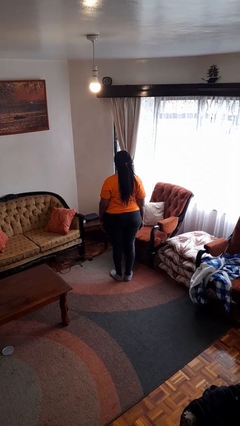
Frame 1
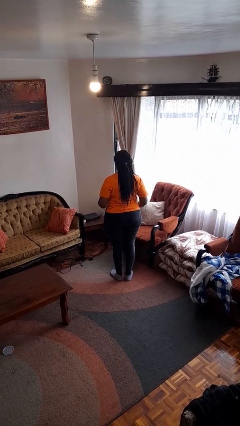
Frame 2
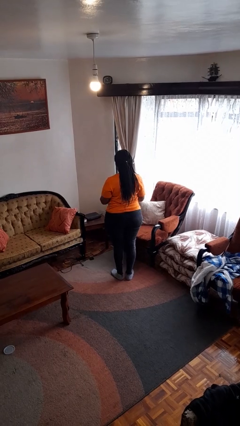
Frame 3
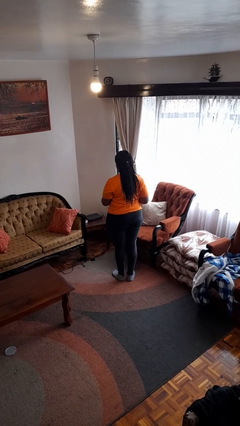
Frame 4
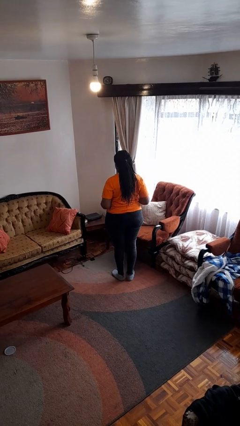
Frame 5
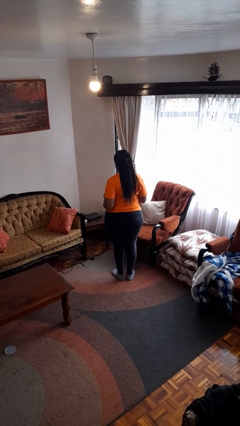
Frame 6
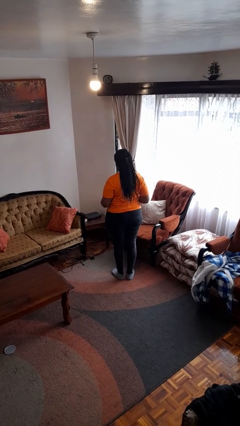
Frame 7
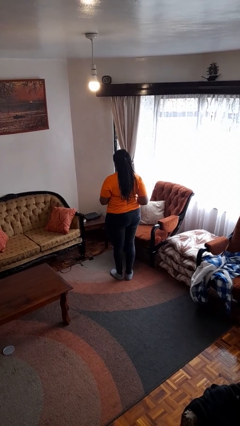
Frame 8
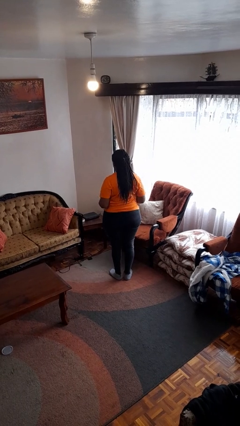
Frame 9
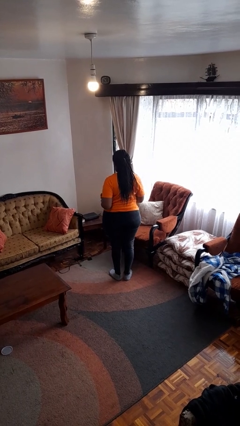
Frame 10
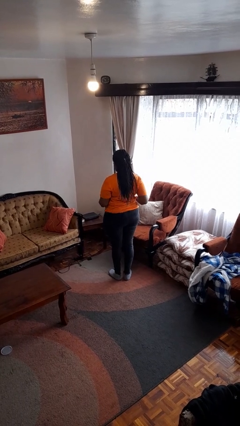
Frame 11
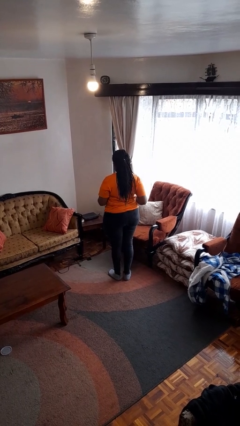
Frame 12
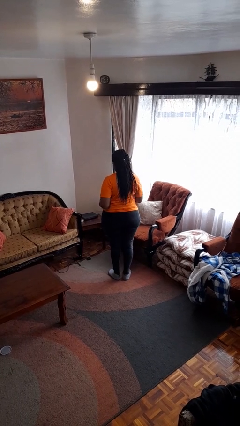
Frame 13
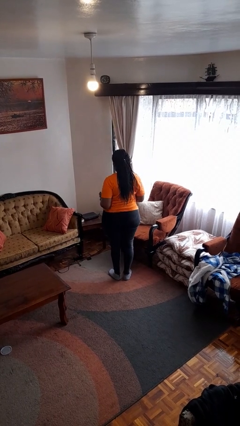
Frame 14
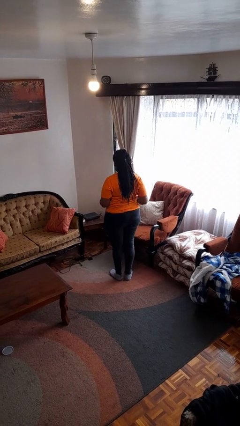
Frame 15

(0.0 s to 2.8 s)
person wiggles hips

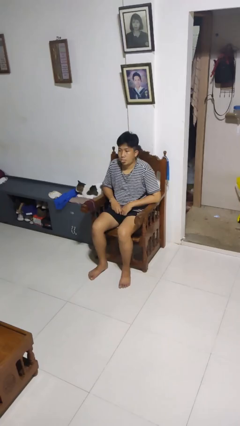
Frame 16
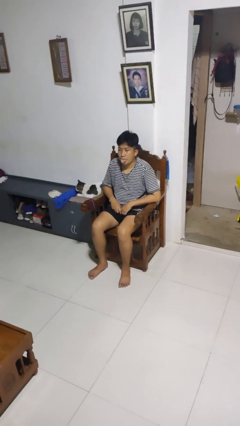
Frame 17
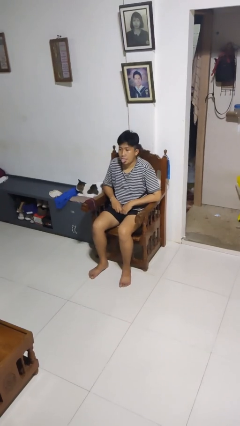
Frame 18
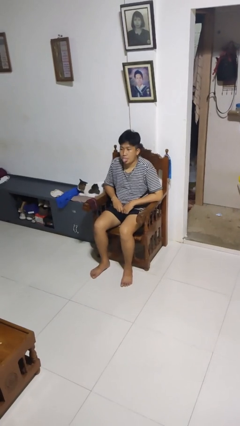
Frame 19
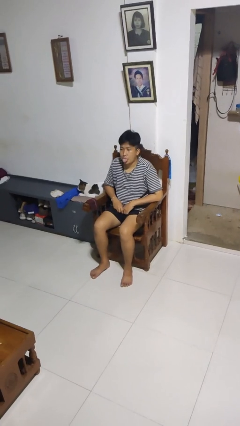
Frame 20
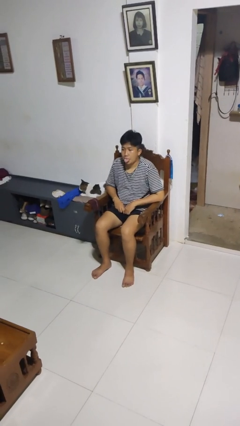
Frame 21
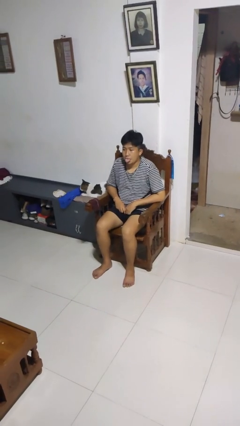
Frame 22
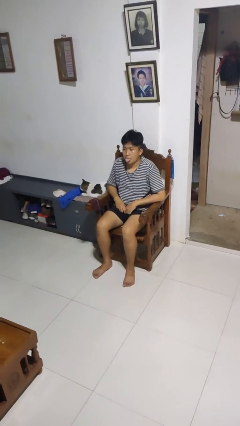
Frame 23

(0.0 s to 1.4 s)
person sticks out tongue

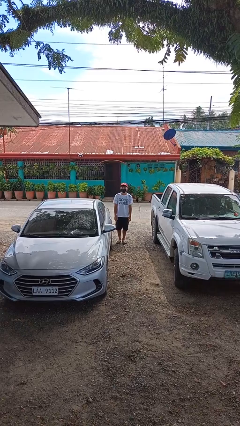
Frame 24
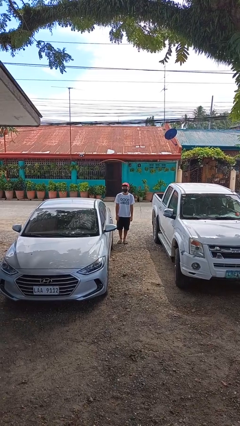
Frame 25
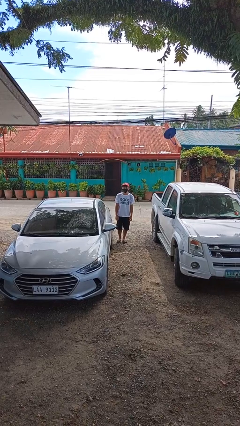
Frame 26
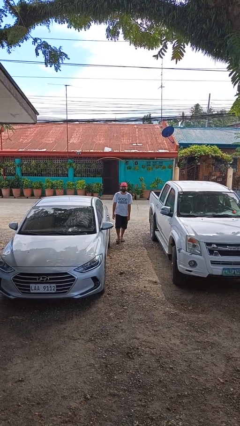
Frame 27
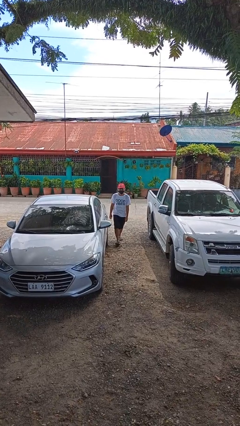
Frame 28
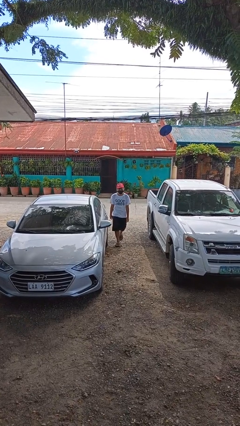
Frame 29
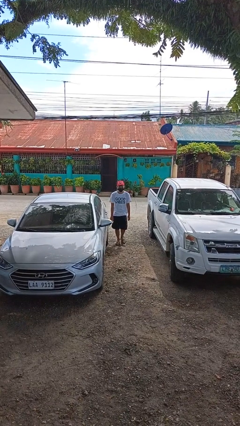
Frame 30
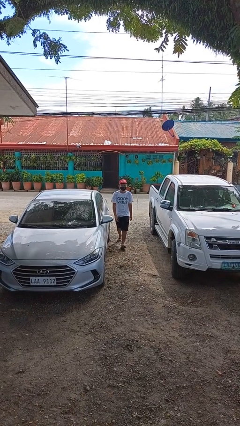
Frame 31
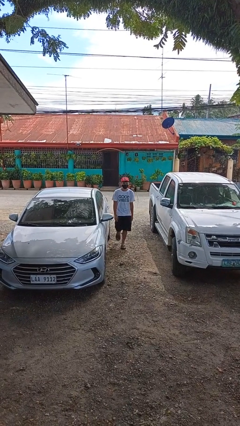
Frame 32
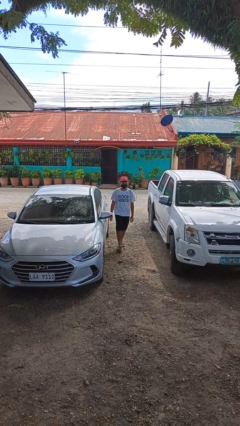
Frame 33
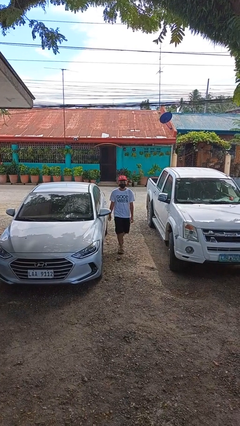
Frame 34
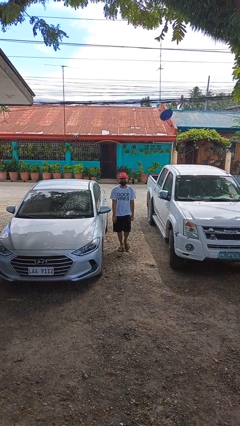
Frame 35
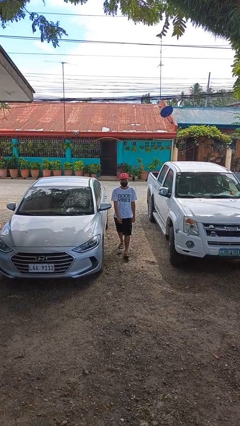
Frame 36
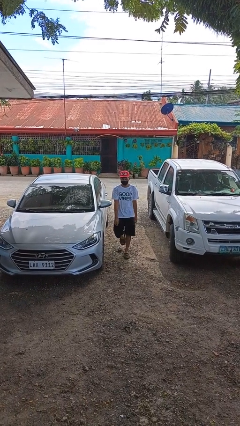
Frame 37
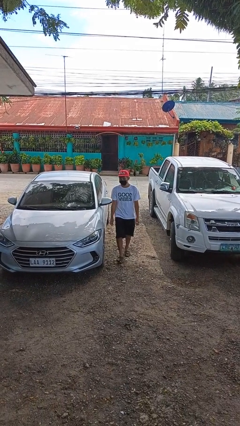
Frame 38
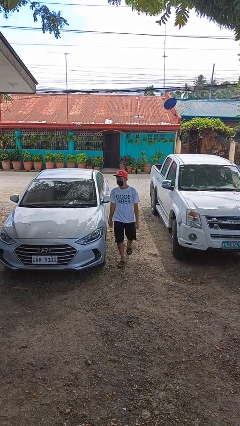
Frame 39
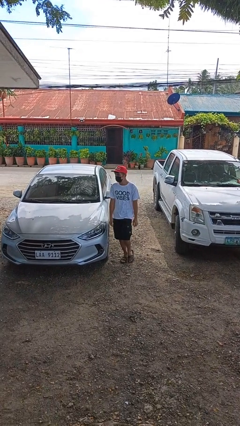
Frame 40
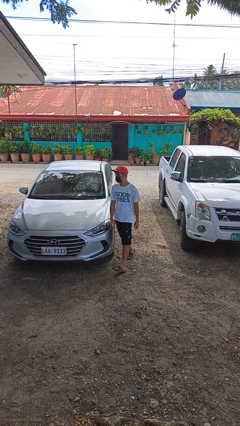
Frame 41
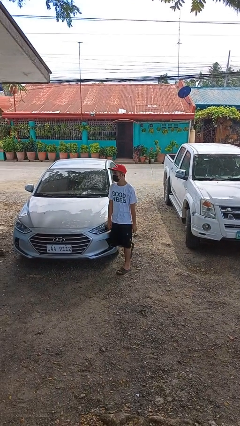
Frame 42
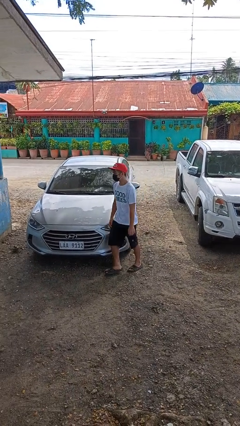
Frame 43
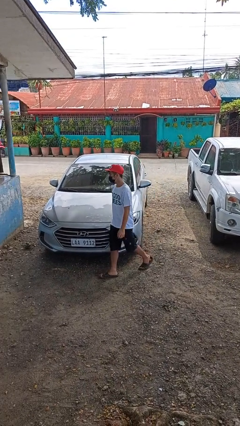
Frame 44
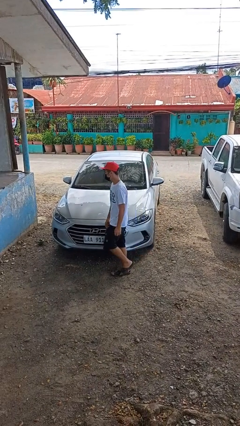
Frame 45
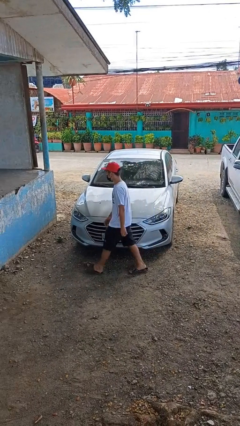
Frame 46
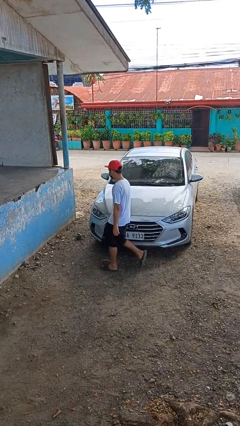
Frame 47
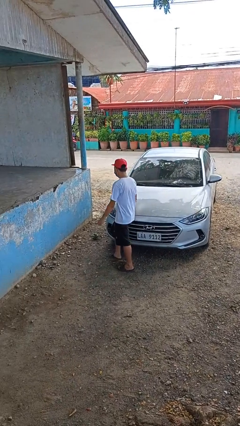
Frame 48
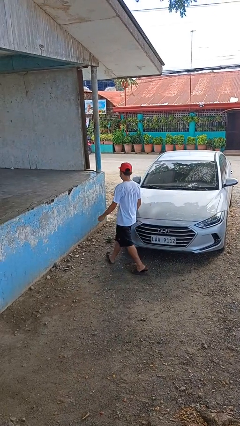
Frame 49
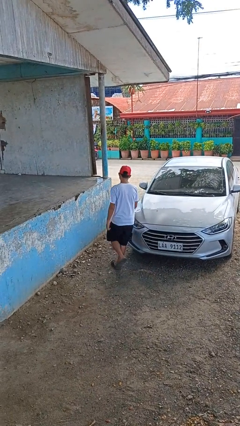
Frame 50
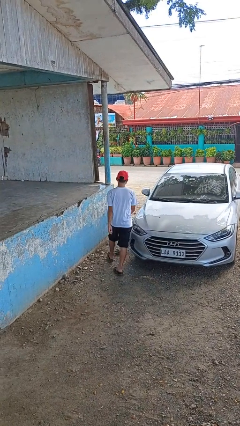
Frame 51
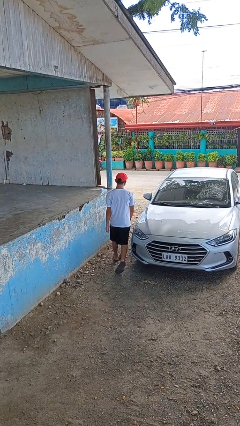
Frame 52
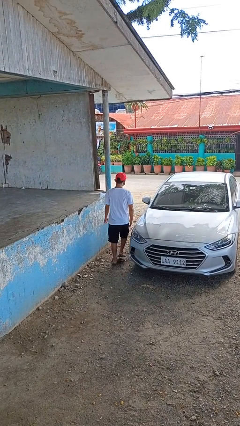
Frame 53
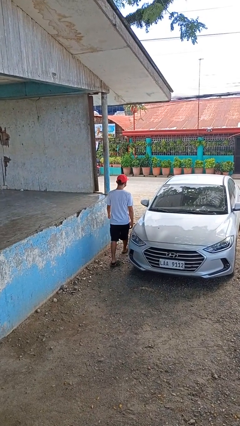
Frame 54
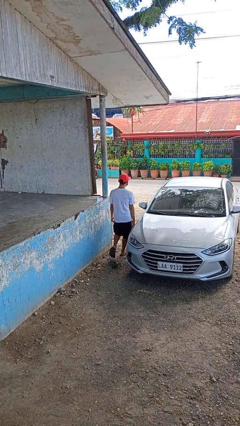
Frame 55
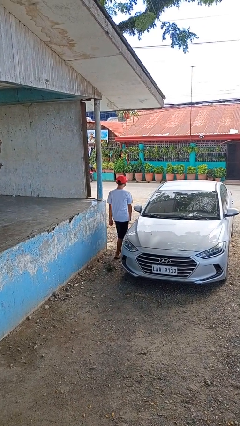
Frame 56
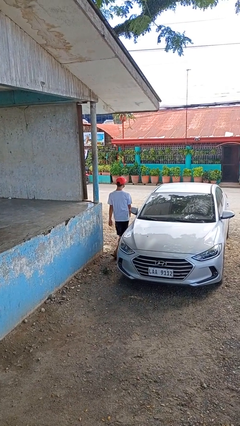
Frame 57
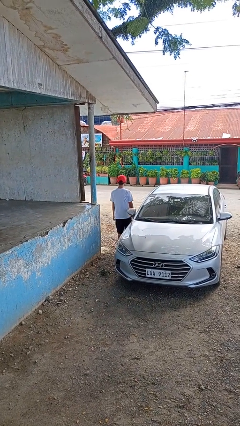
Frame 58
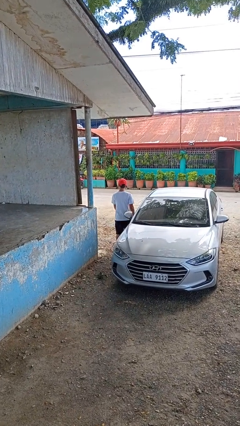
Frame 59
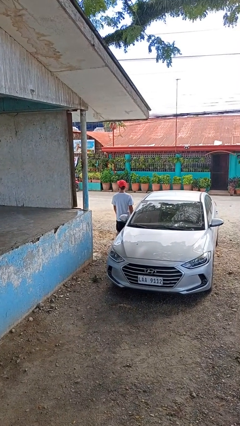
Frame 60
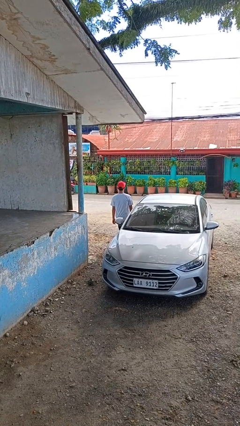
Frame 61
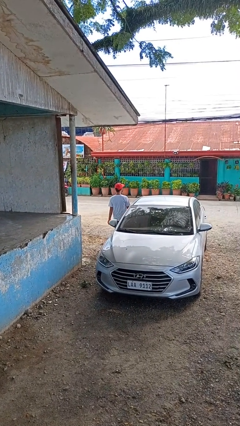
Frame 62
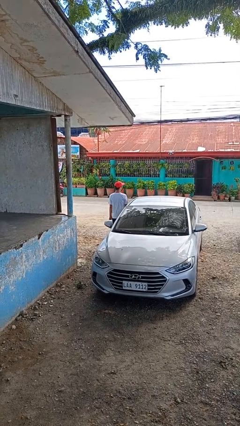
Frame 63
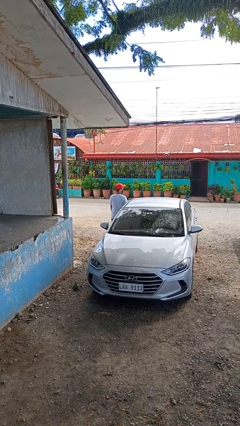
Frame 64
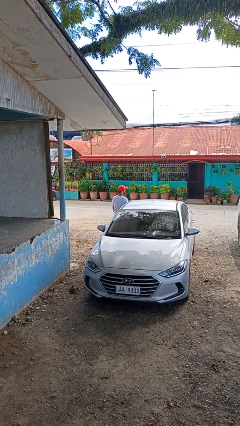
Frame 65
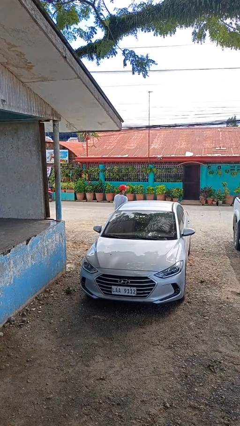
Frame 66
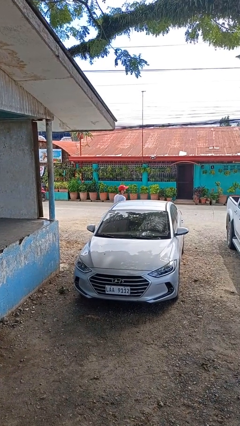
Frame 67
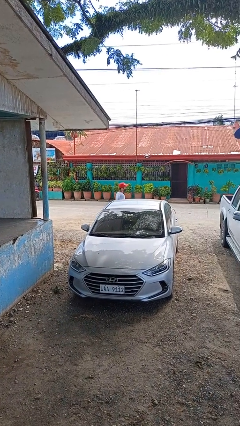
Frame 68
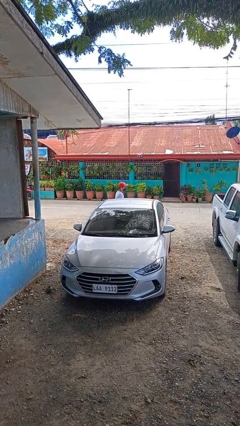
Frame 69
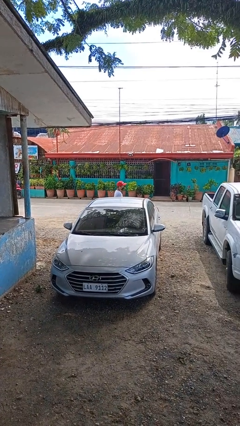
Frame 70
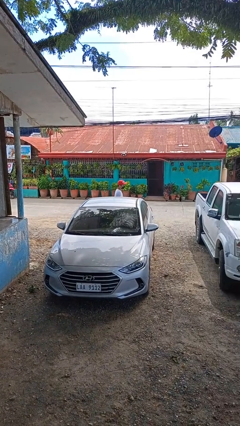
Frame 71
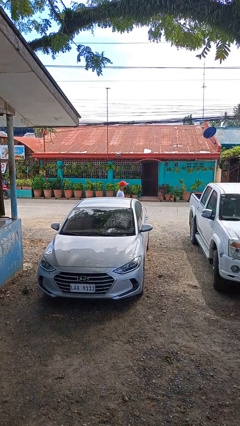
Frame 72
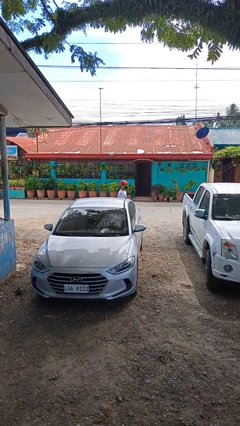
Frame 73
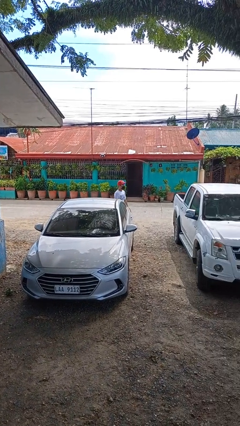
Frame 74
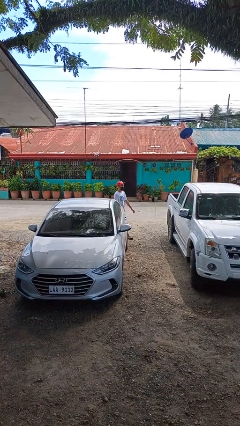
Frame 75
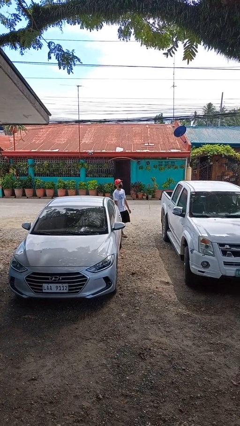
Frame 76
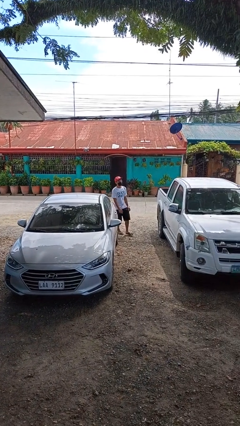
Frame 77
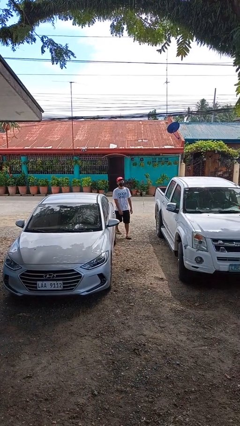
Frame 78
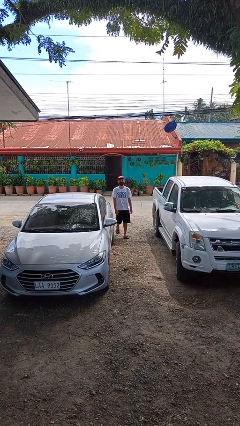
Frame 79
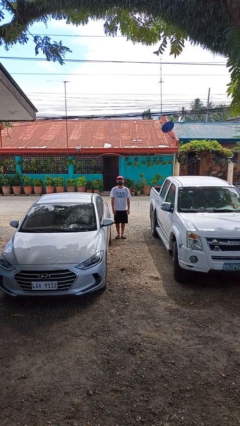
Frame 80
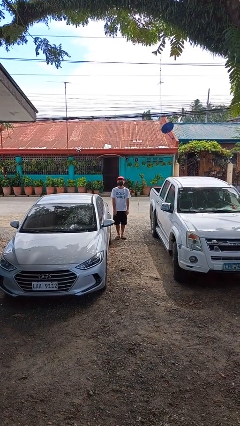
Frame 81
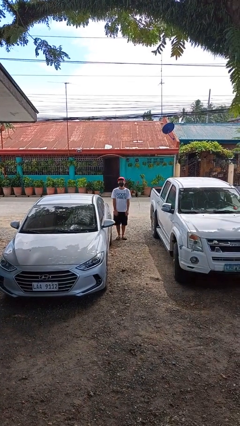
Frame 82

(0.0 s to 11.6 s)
person walks around car

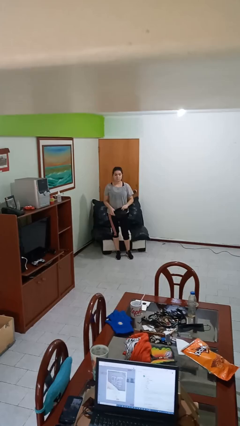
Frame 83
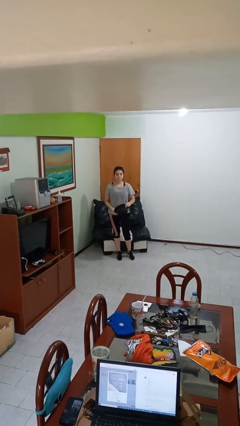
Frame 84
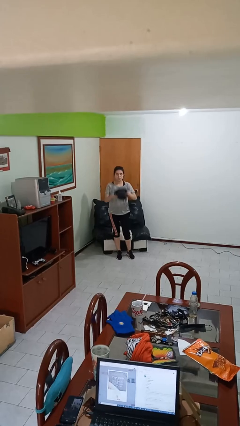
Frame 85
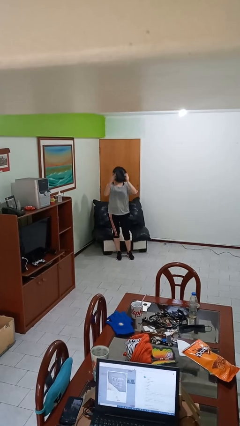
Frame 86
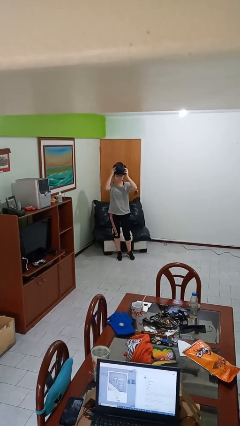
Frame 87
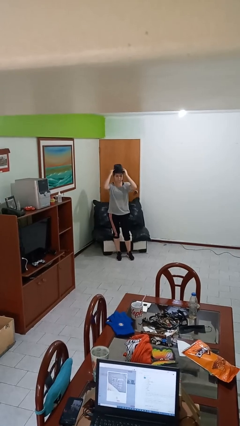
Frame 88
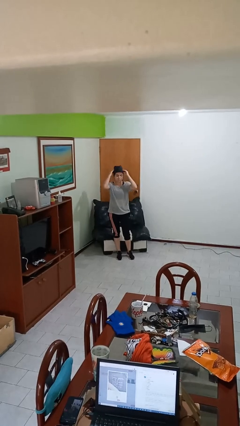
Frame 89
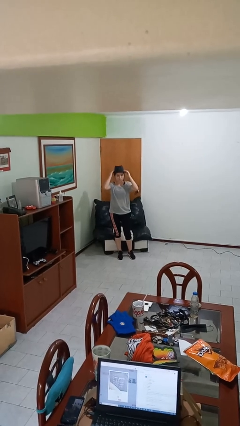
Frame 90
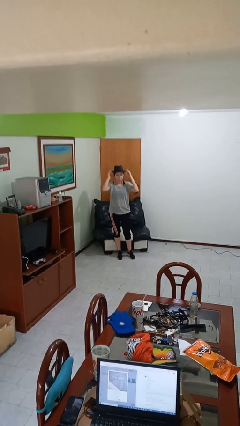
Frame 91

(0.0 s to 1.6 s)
person puts on hat

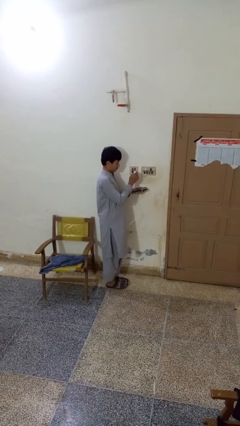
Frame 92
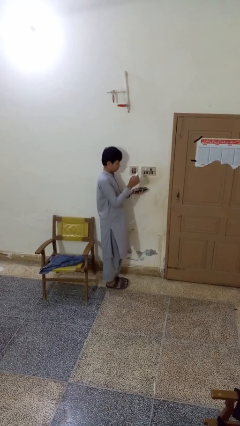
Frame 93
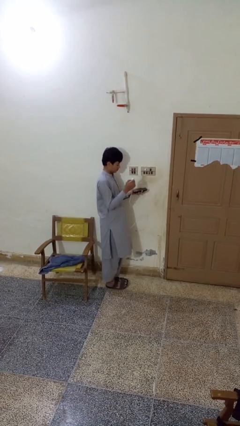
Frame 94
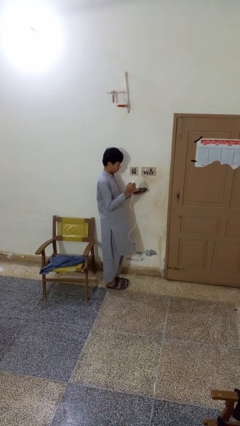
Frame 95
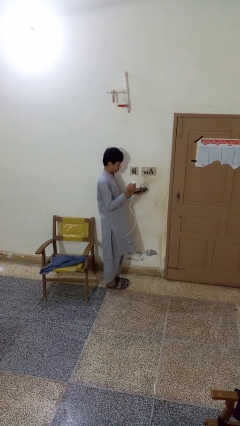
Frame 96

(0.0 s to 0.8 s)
person unplugs from electrical socket
